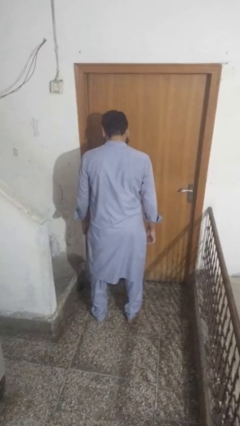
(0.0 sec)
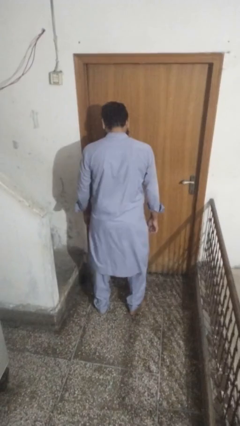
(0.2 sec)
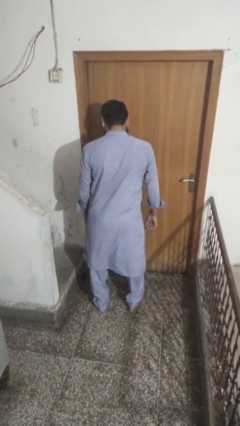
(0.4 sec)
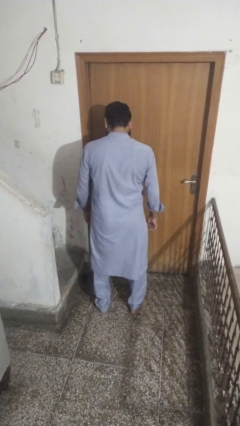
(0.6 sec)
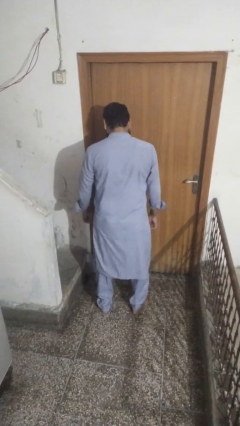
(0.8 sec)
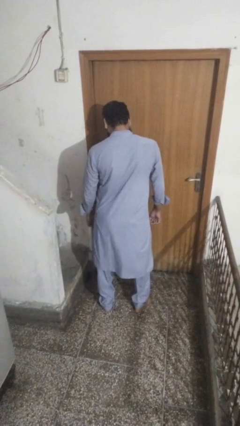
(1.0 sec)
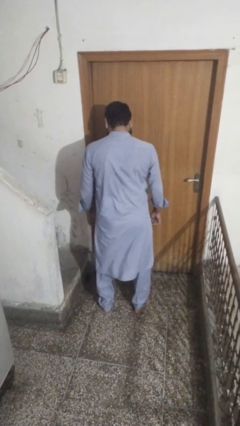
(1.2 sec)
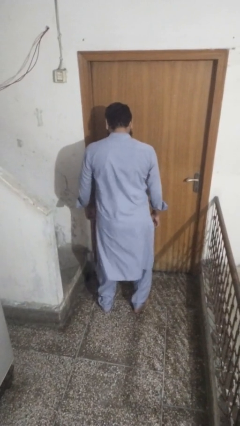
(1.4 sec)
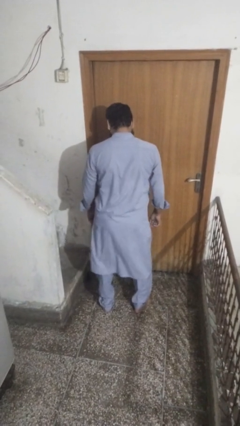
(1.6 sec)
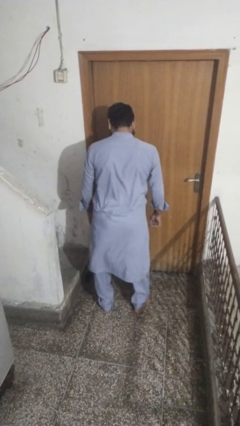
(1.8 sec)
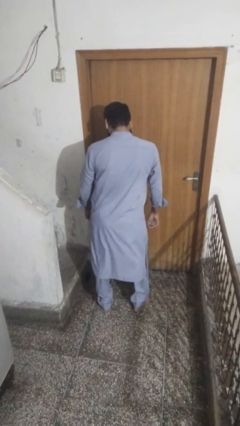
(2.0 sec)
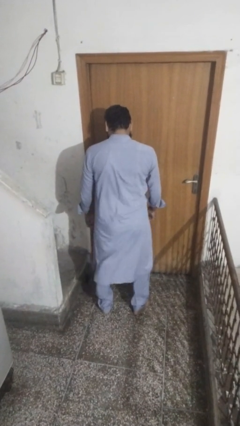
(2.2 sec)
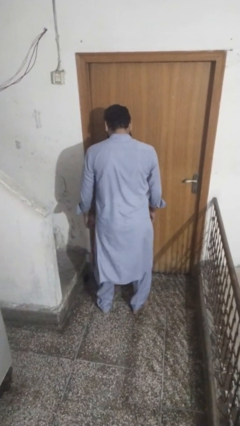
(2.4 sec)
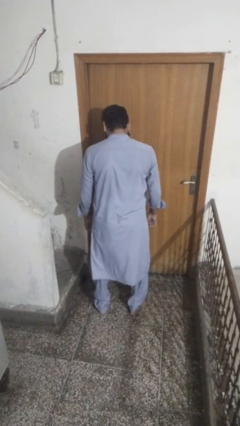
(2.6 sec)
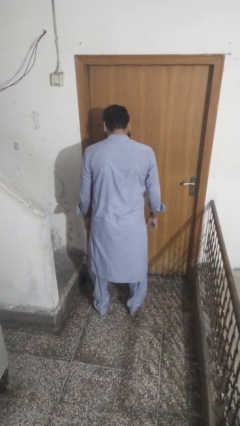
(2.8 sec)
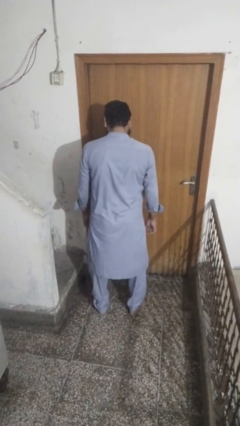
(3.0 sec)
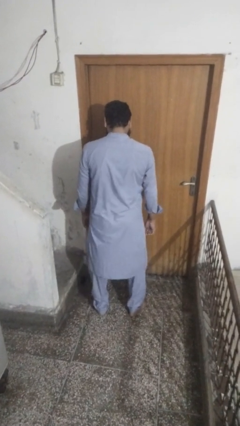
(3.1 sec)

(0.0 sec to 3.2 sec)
person wiggles hips

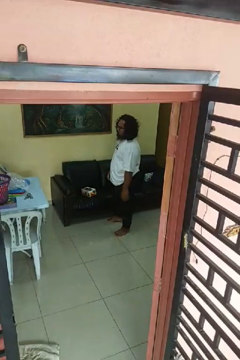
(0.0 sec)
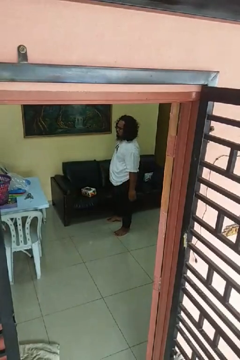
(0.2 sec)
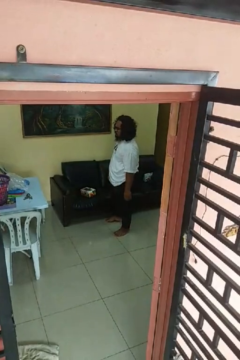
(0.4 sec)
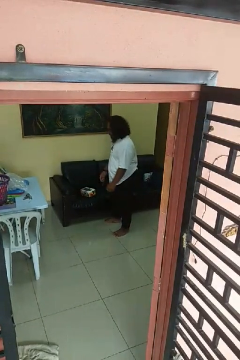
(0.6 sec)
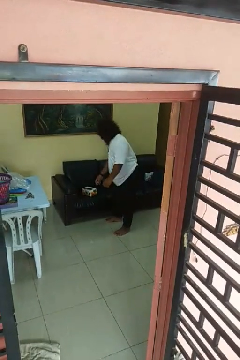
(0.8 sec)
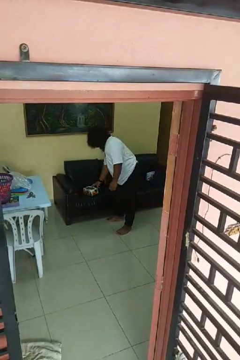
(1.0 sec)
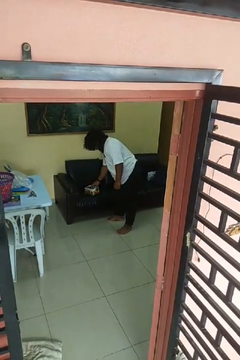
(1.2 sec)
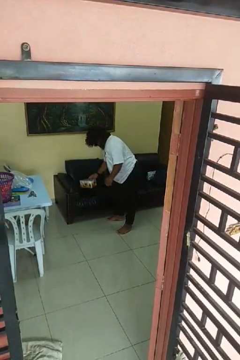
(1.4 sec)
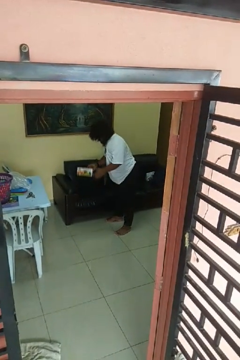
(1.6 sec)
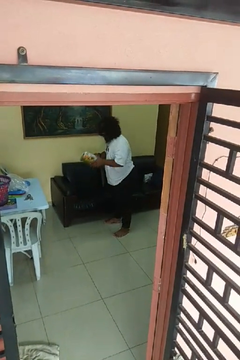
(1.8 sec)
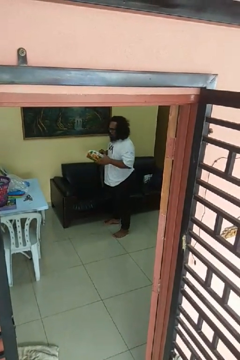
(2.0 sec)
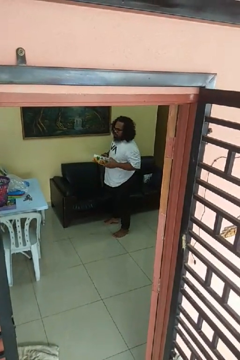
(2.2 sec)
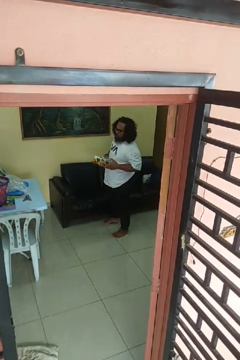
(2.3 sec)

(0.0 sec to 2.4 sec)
person picks up object from couch

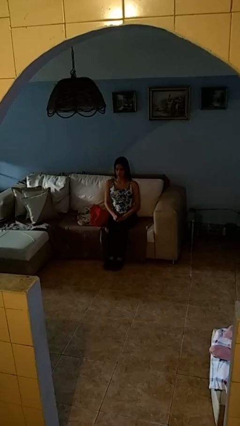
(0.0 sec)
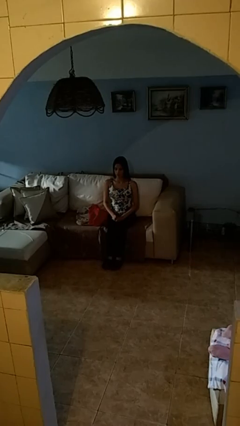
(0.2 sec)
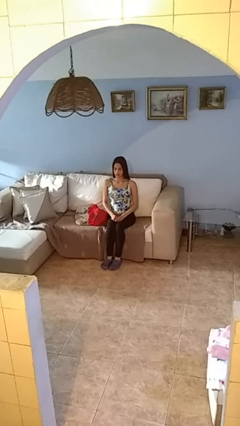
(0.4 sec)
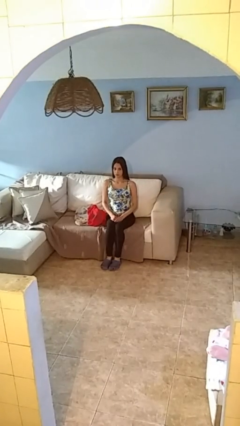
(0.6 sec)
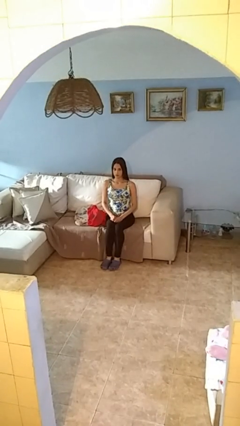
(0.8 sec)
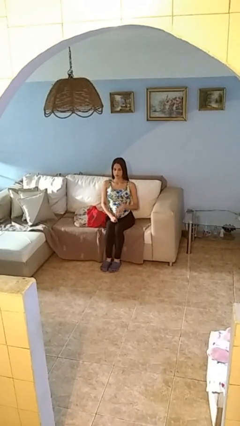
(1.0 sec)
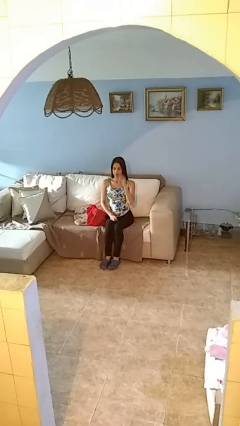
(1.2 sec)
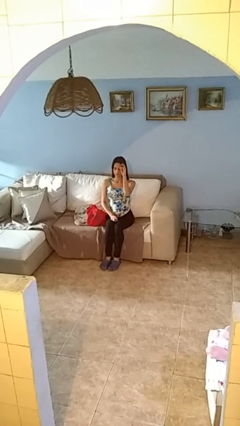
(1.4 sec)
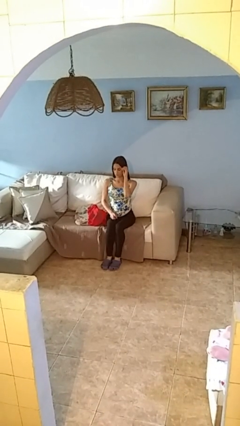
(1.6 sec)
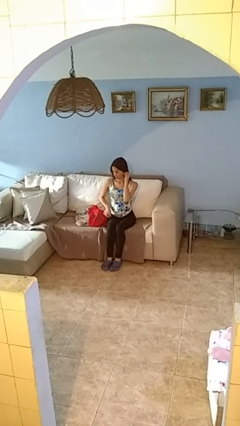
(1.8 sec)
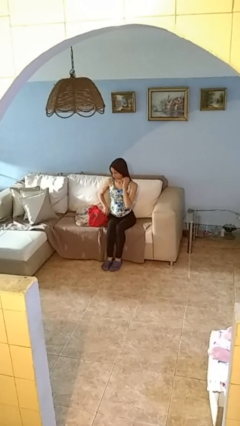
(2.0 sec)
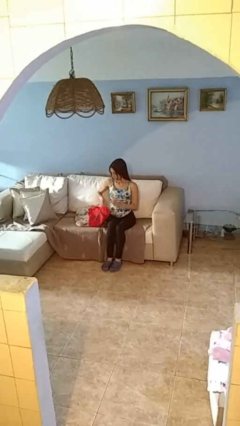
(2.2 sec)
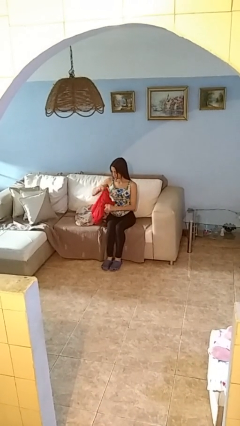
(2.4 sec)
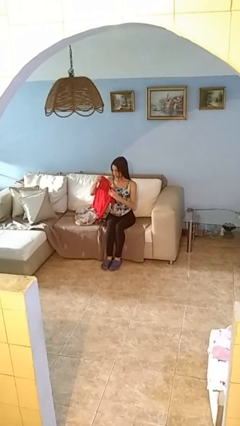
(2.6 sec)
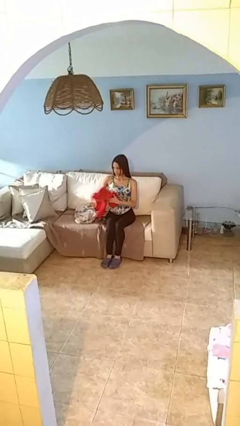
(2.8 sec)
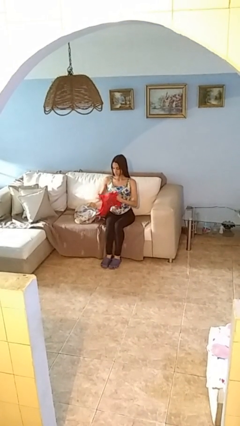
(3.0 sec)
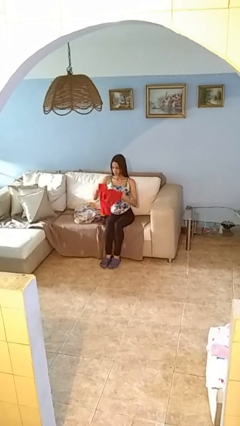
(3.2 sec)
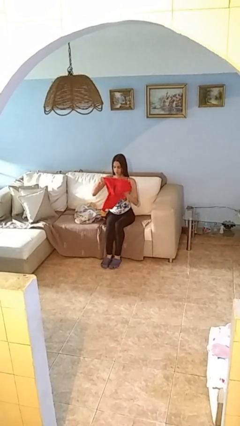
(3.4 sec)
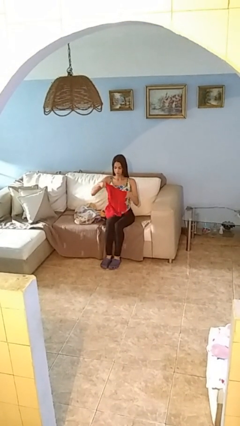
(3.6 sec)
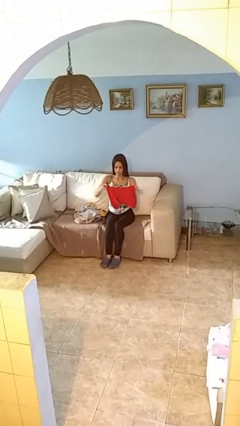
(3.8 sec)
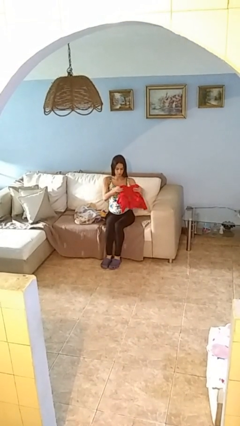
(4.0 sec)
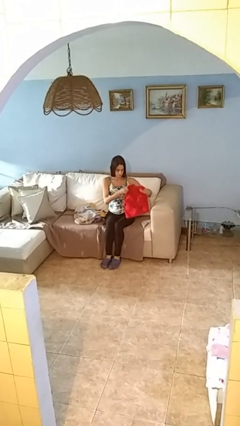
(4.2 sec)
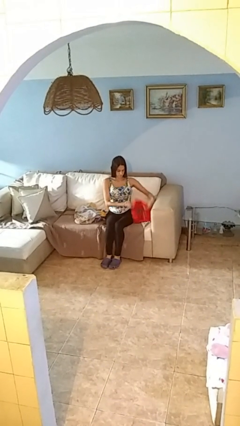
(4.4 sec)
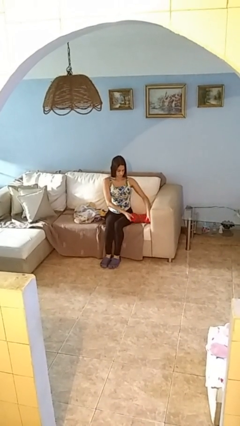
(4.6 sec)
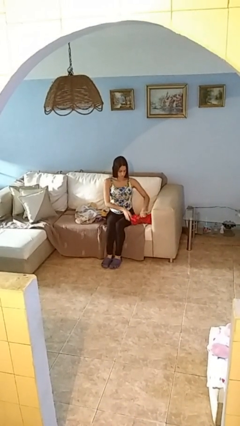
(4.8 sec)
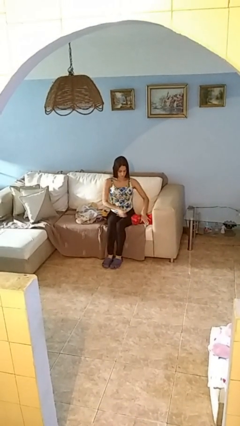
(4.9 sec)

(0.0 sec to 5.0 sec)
person folds shirt

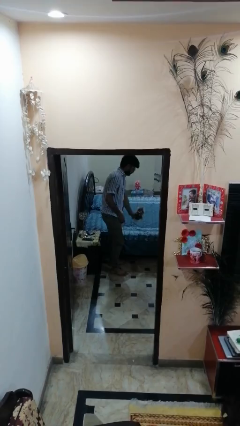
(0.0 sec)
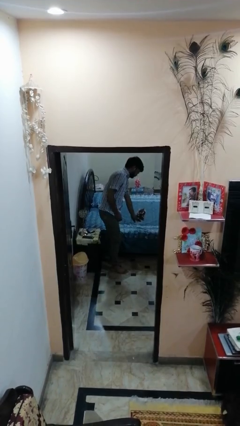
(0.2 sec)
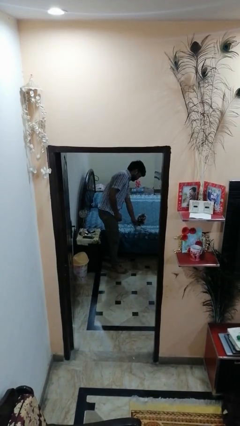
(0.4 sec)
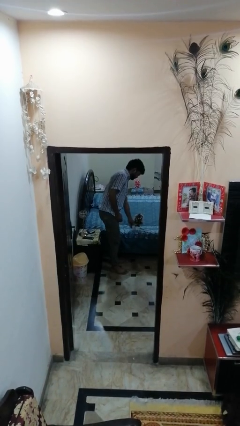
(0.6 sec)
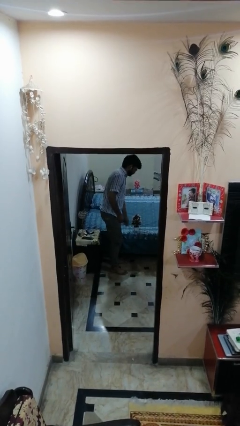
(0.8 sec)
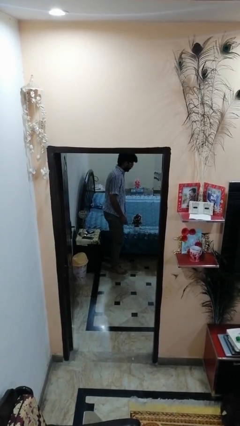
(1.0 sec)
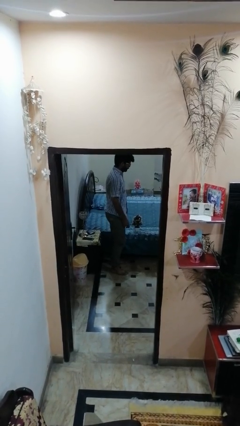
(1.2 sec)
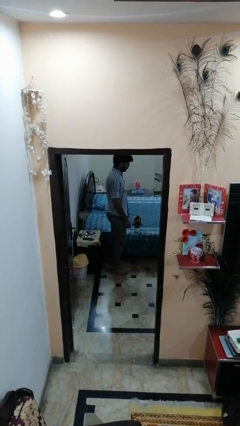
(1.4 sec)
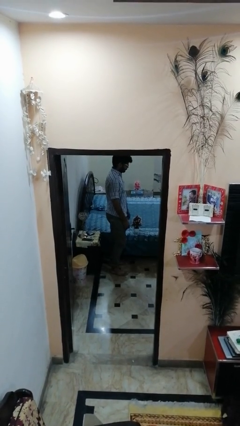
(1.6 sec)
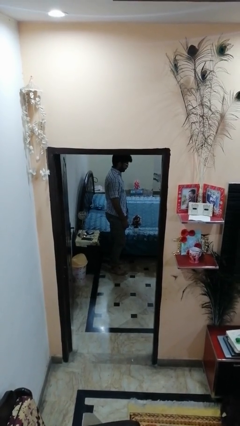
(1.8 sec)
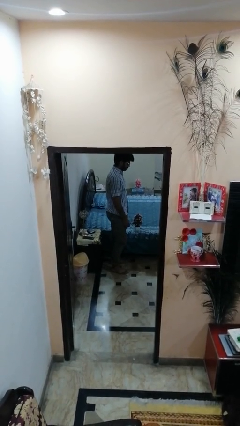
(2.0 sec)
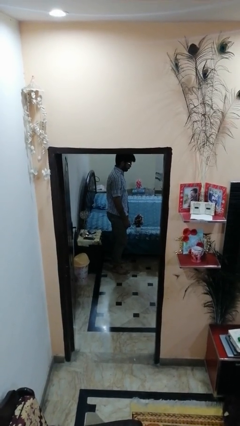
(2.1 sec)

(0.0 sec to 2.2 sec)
person puts down object on bed

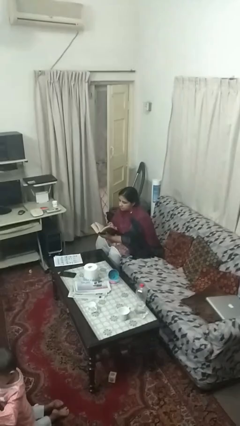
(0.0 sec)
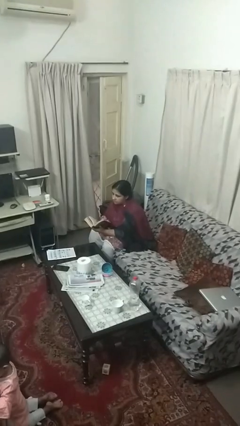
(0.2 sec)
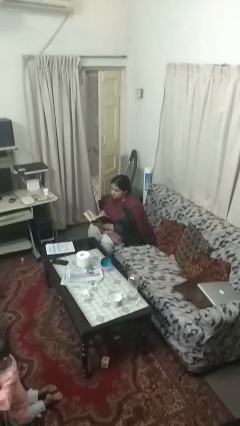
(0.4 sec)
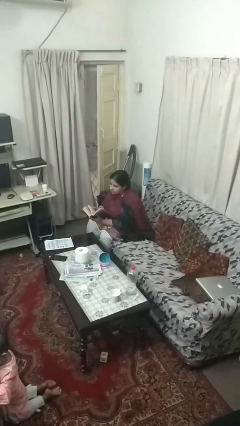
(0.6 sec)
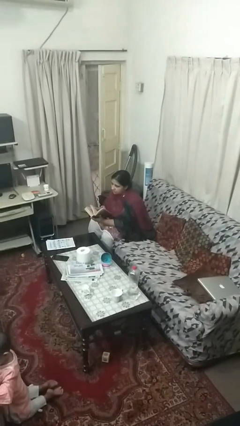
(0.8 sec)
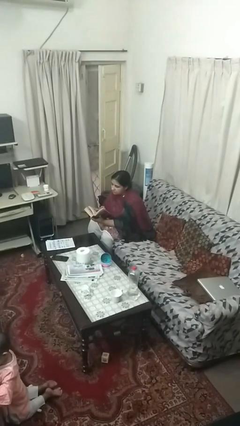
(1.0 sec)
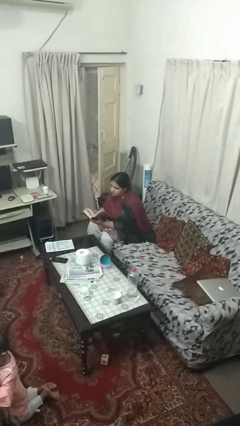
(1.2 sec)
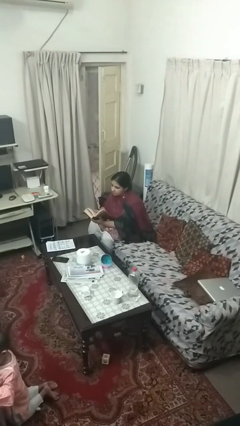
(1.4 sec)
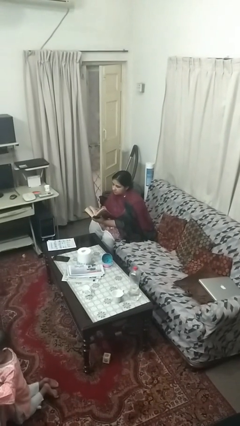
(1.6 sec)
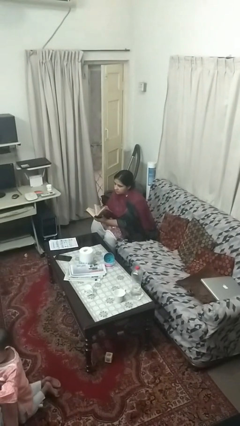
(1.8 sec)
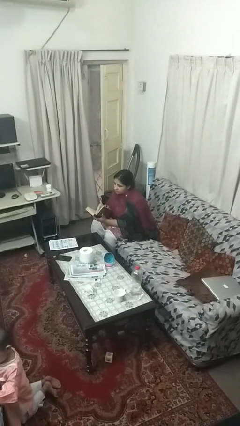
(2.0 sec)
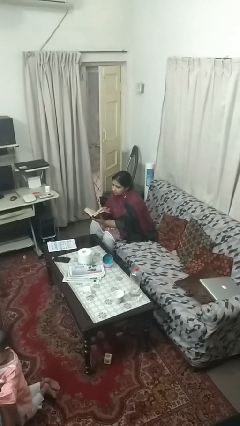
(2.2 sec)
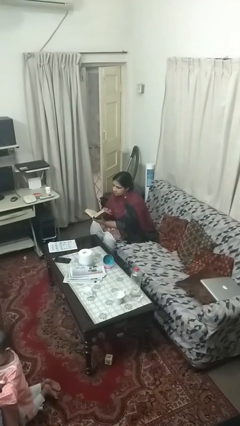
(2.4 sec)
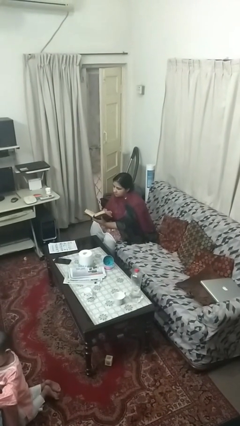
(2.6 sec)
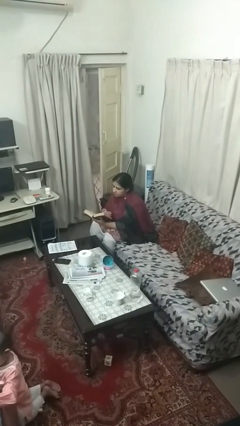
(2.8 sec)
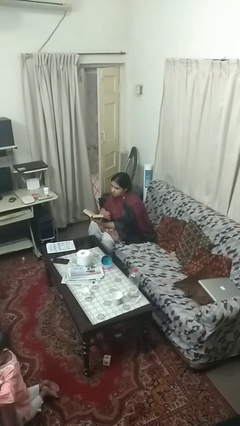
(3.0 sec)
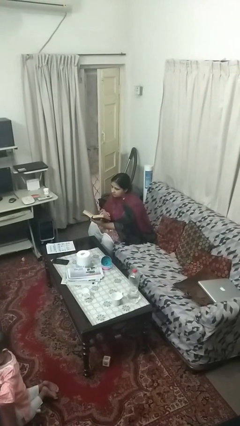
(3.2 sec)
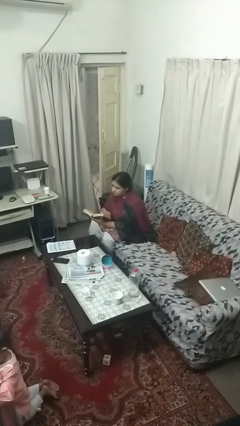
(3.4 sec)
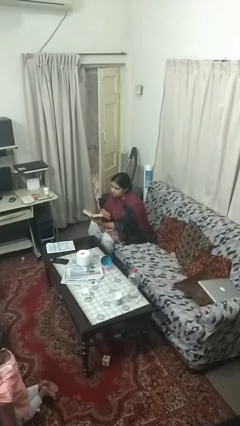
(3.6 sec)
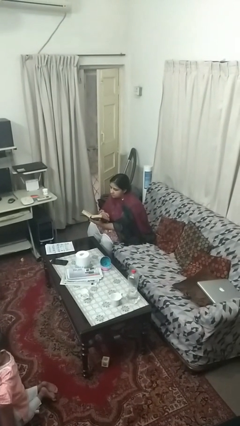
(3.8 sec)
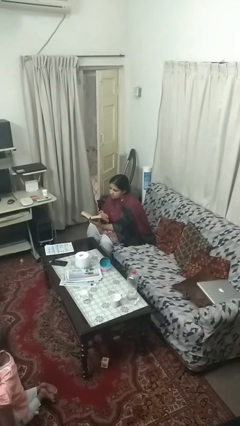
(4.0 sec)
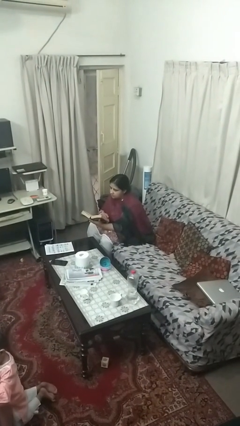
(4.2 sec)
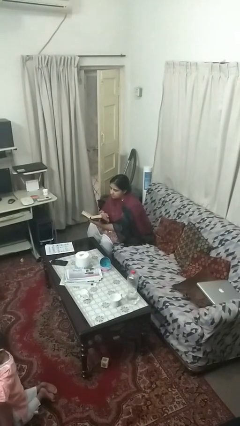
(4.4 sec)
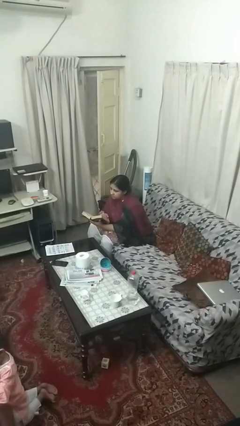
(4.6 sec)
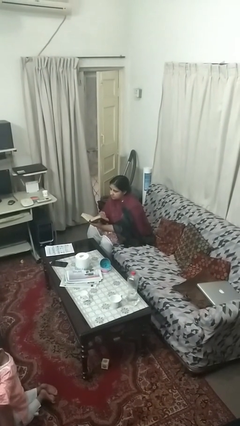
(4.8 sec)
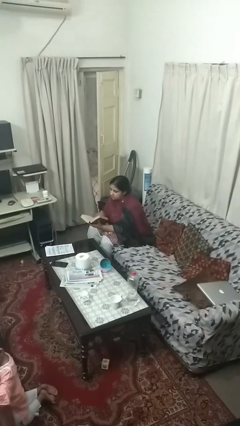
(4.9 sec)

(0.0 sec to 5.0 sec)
person reads book
